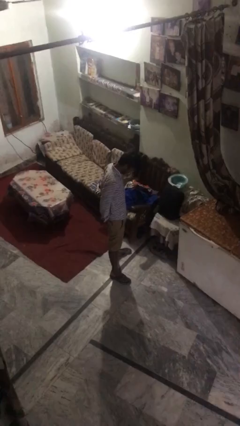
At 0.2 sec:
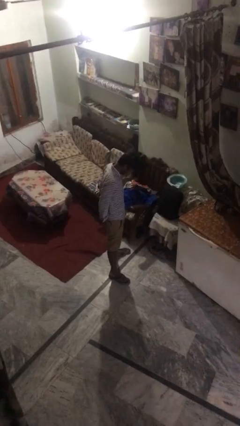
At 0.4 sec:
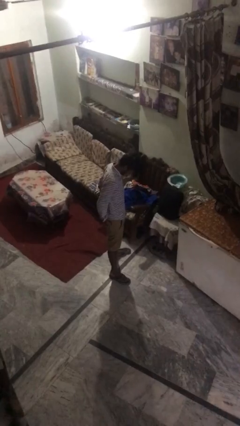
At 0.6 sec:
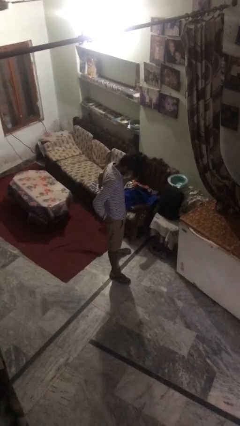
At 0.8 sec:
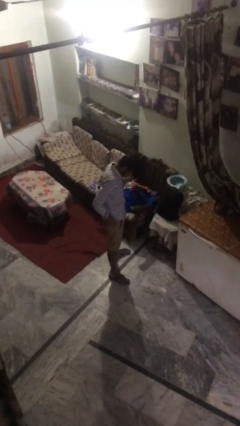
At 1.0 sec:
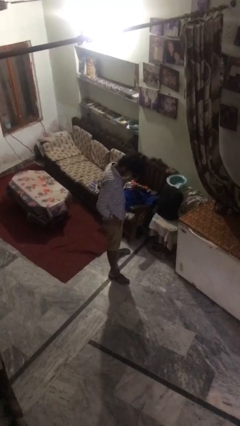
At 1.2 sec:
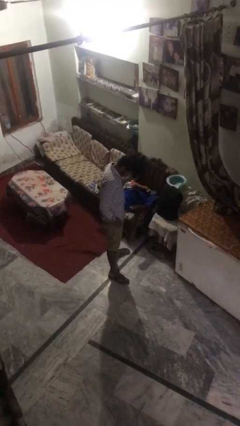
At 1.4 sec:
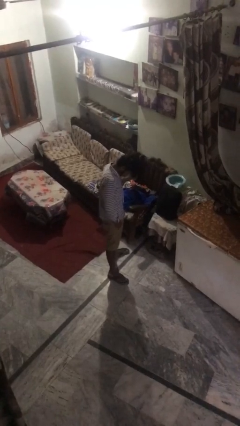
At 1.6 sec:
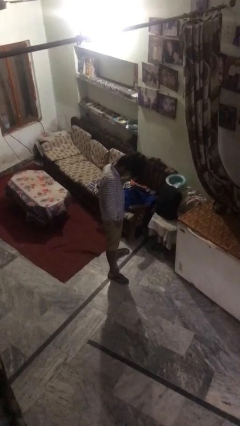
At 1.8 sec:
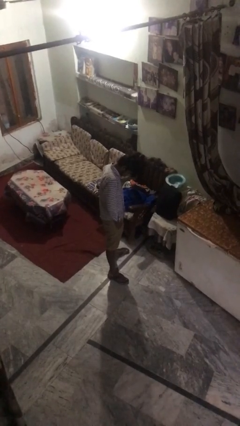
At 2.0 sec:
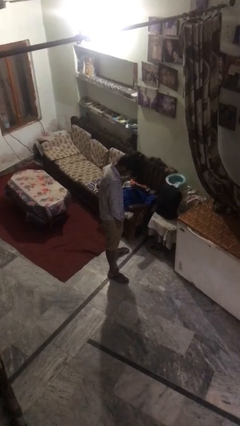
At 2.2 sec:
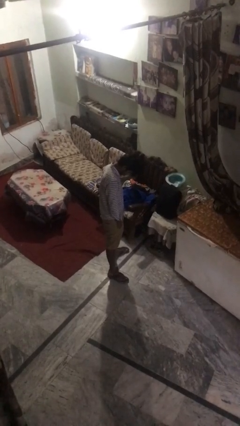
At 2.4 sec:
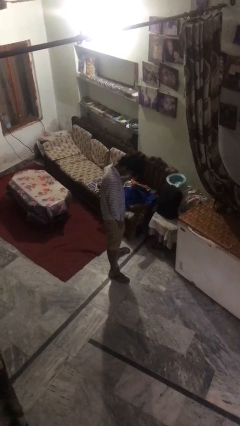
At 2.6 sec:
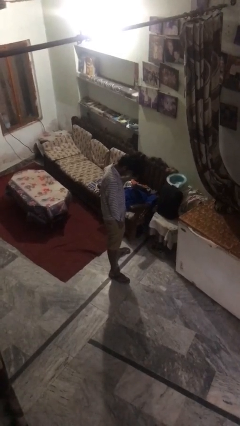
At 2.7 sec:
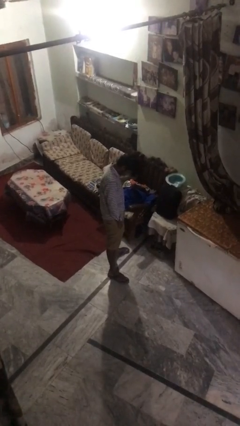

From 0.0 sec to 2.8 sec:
person puts hands in back pockets

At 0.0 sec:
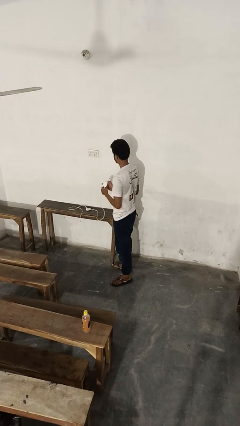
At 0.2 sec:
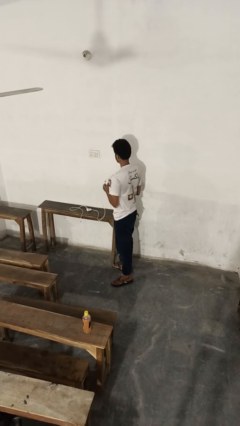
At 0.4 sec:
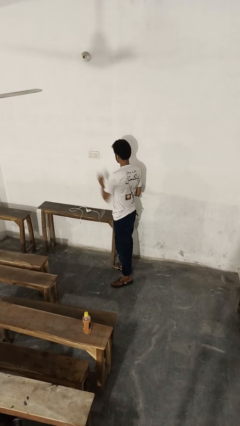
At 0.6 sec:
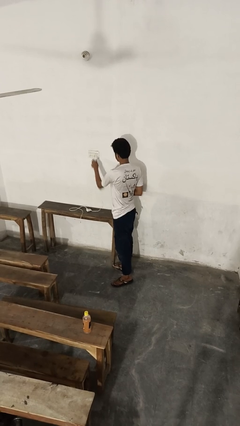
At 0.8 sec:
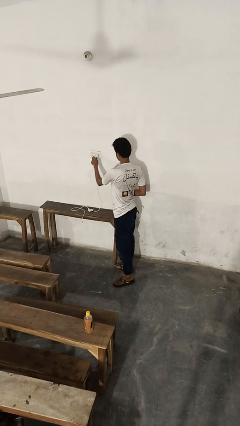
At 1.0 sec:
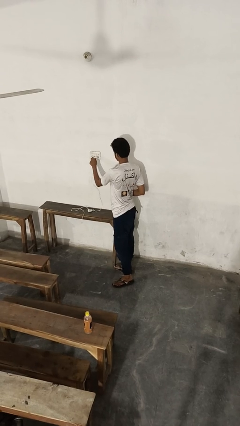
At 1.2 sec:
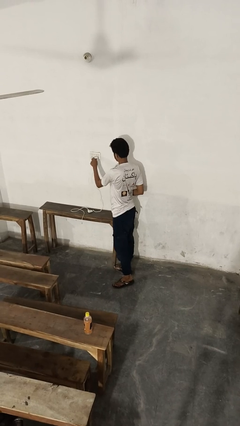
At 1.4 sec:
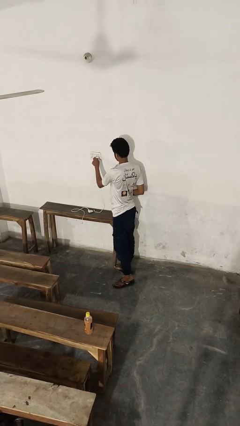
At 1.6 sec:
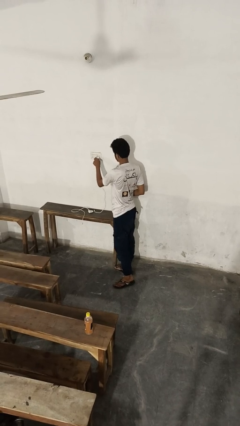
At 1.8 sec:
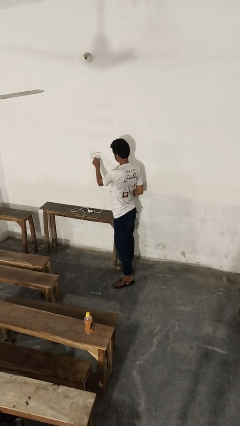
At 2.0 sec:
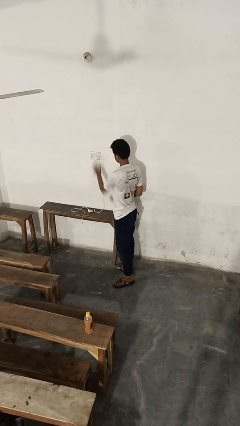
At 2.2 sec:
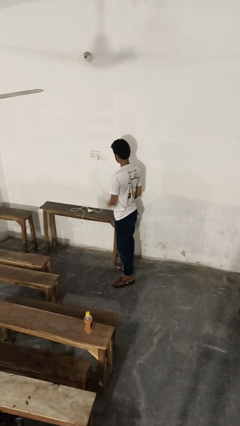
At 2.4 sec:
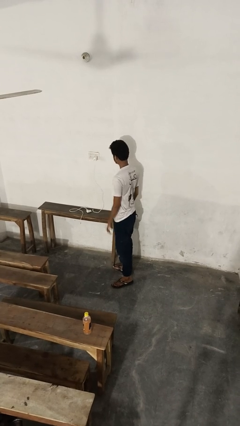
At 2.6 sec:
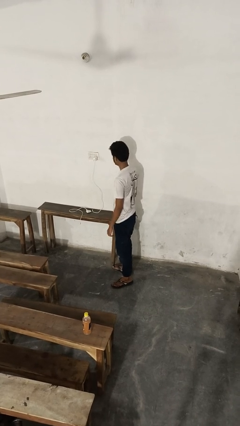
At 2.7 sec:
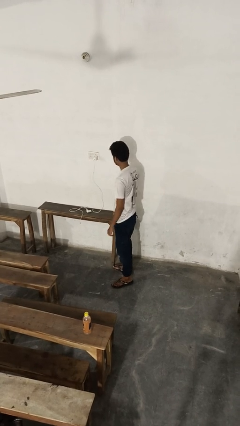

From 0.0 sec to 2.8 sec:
person plugs into electrical socket

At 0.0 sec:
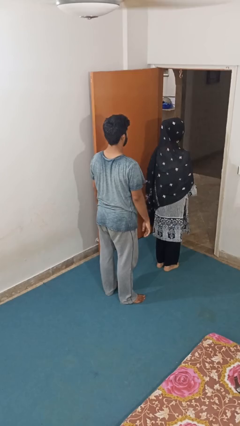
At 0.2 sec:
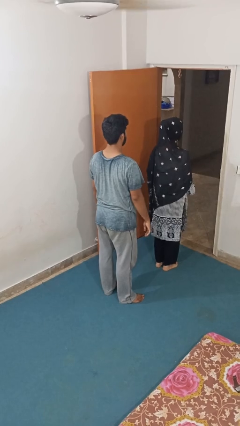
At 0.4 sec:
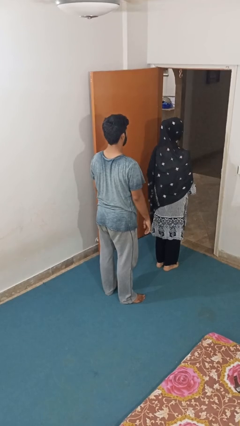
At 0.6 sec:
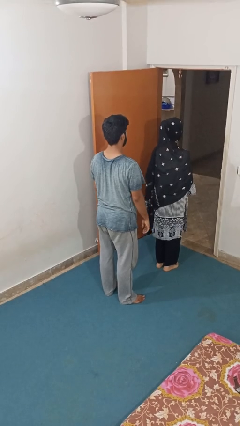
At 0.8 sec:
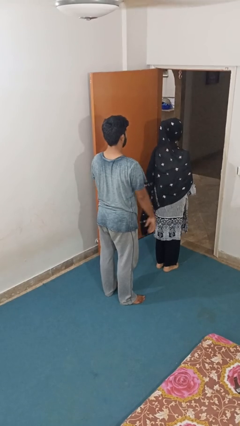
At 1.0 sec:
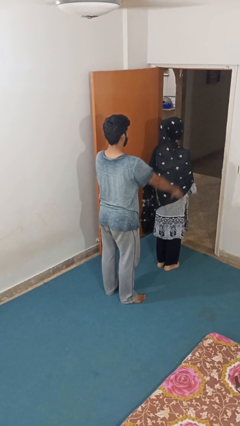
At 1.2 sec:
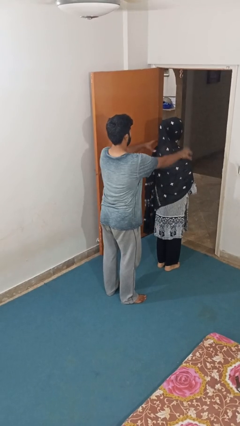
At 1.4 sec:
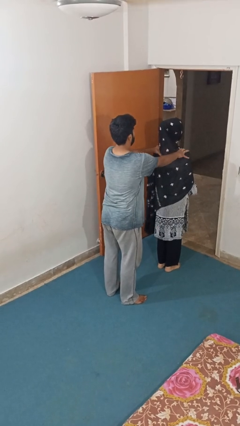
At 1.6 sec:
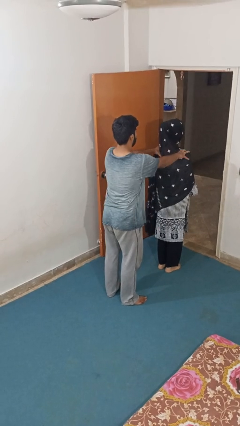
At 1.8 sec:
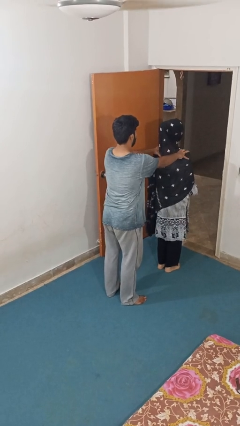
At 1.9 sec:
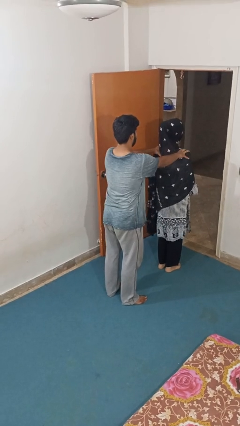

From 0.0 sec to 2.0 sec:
person grabs person by shoulder

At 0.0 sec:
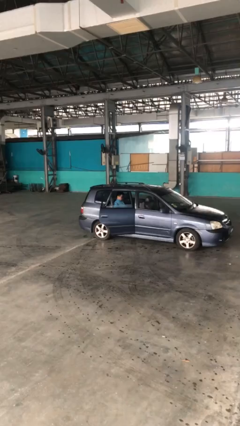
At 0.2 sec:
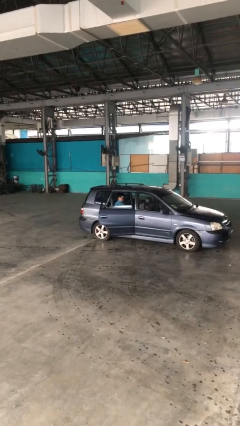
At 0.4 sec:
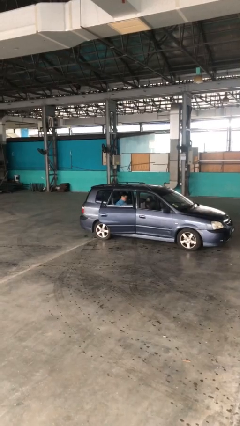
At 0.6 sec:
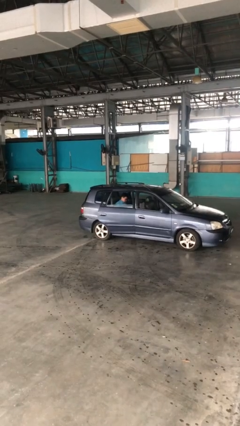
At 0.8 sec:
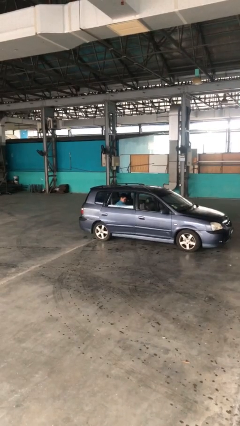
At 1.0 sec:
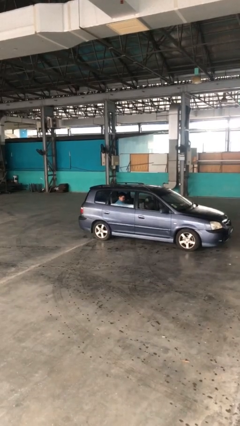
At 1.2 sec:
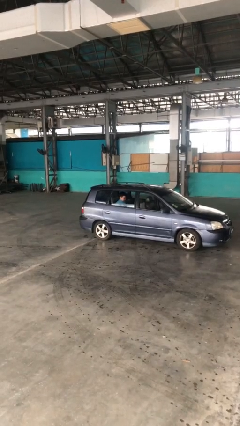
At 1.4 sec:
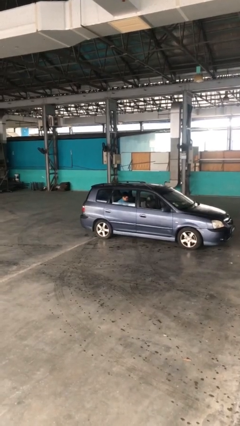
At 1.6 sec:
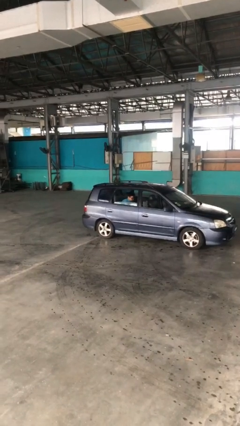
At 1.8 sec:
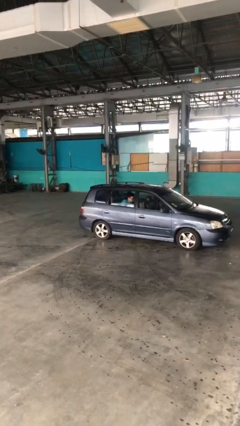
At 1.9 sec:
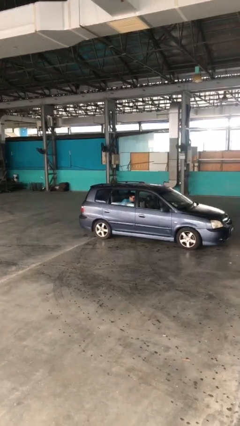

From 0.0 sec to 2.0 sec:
person closes car door

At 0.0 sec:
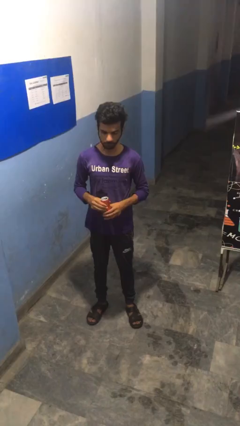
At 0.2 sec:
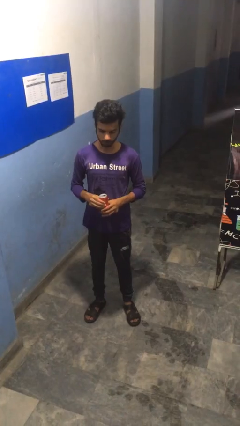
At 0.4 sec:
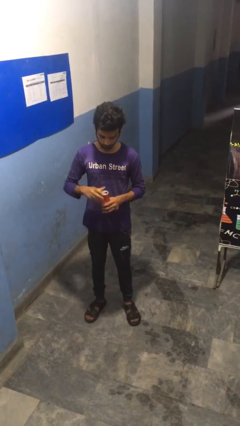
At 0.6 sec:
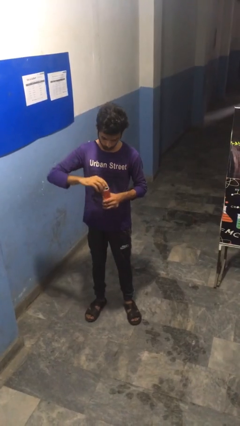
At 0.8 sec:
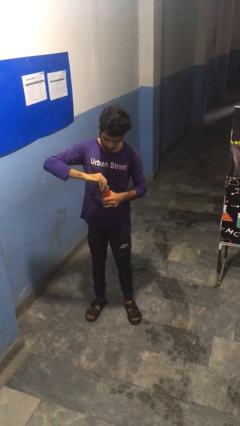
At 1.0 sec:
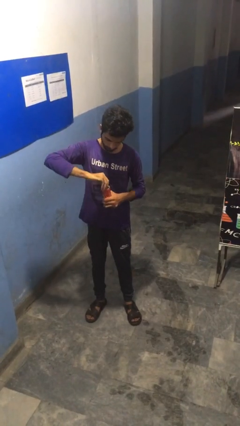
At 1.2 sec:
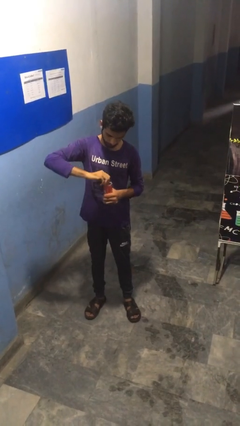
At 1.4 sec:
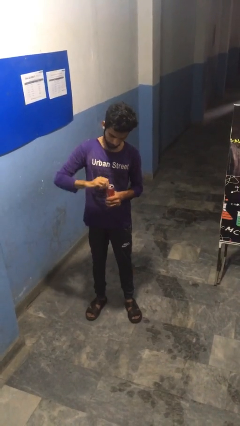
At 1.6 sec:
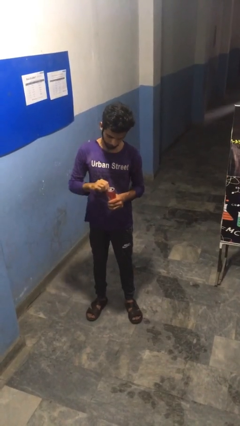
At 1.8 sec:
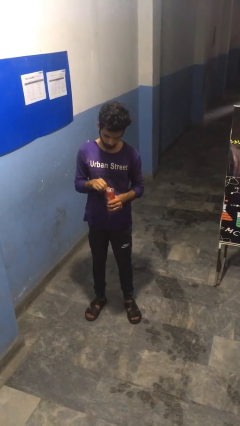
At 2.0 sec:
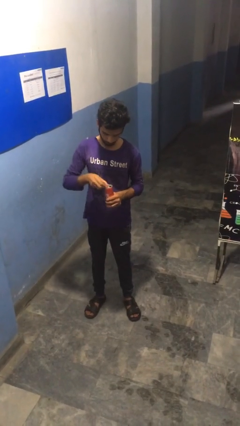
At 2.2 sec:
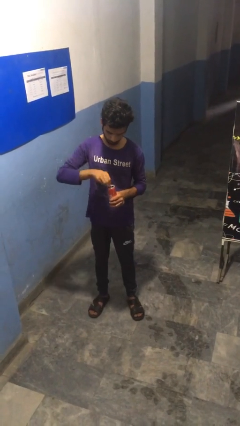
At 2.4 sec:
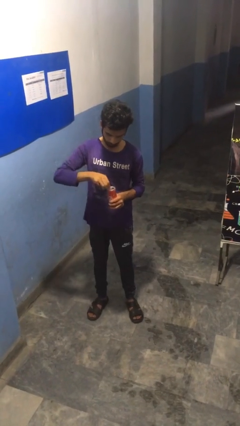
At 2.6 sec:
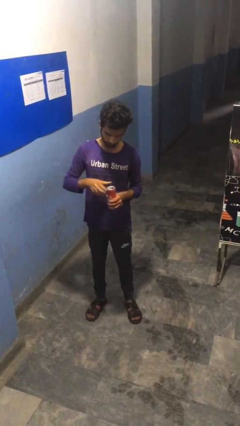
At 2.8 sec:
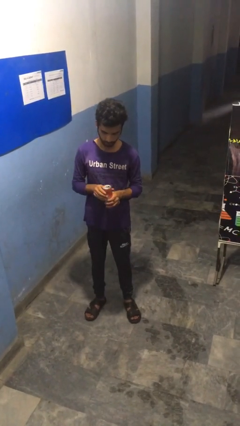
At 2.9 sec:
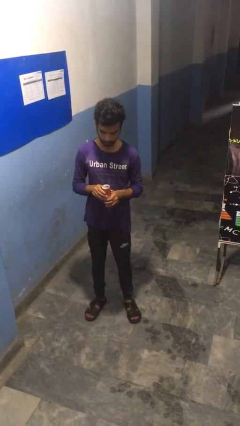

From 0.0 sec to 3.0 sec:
person opens beverage can

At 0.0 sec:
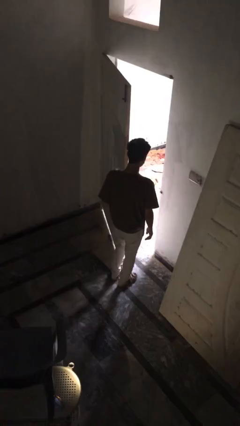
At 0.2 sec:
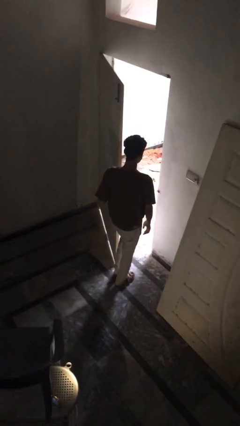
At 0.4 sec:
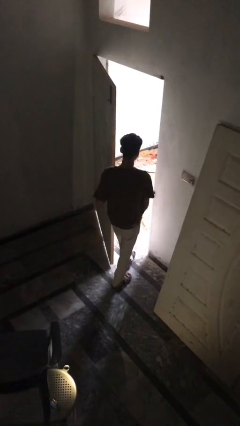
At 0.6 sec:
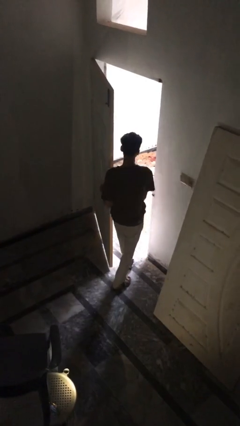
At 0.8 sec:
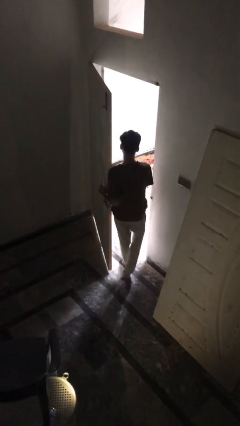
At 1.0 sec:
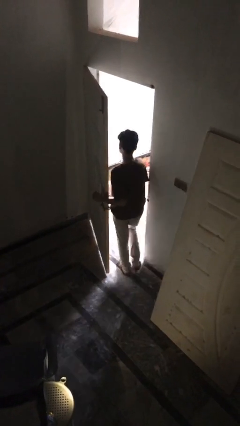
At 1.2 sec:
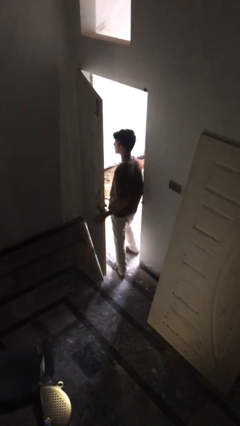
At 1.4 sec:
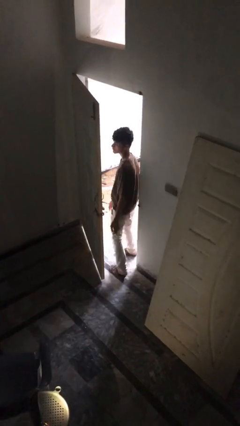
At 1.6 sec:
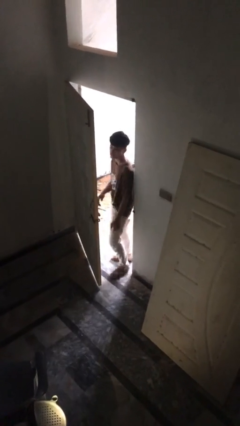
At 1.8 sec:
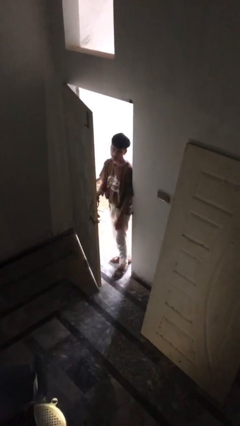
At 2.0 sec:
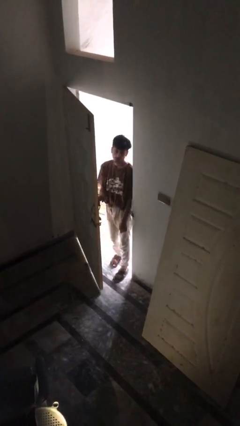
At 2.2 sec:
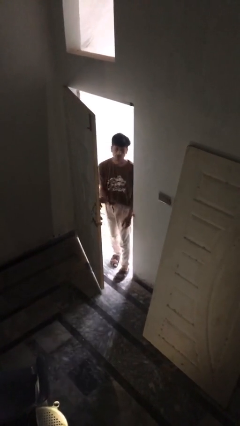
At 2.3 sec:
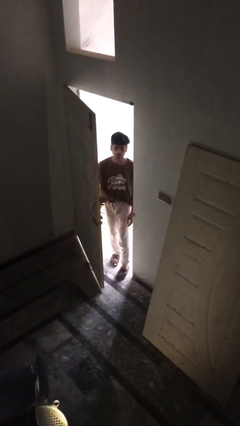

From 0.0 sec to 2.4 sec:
person exits scene through structure

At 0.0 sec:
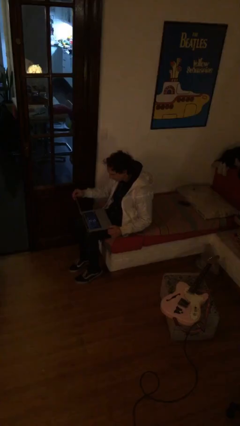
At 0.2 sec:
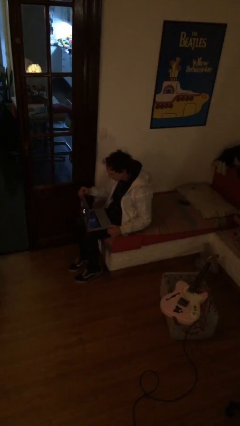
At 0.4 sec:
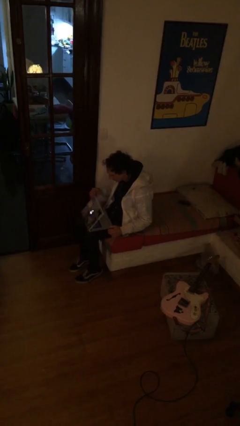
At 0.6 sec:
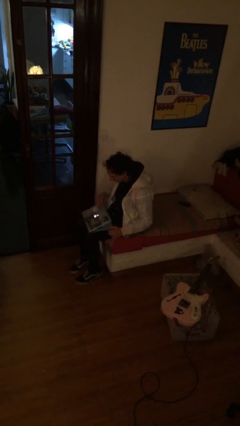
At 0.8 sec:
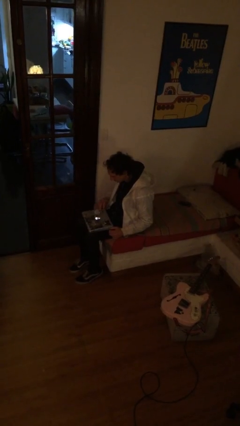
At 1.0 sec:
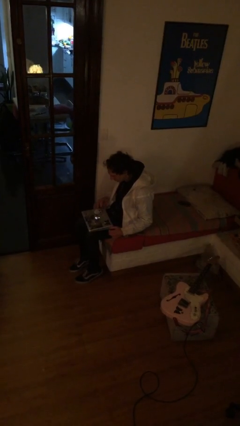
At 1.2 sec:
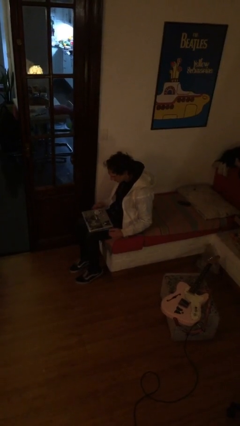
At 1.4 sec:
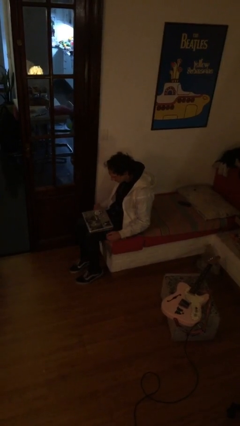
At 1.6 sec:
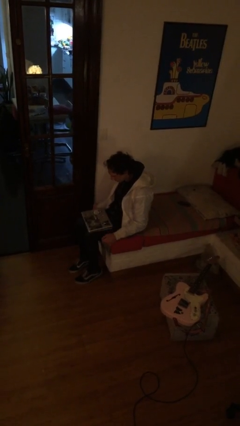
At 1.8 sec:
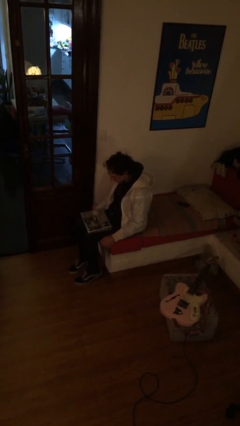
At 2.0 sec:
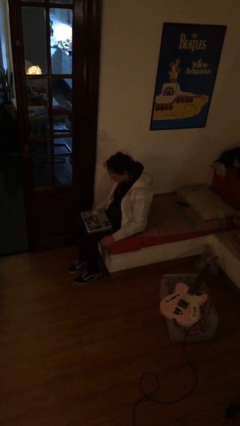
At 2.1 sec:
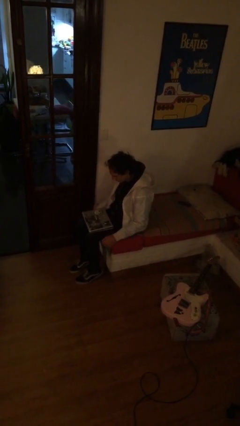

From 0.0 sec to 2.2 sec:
person closes laptop
